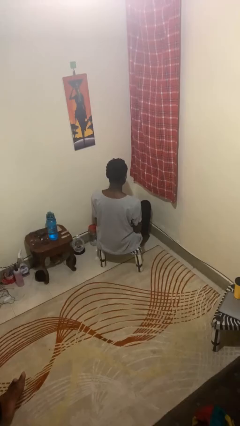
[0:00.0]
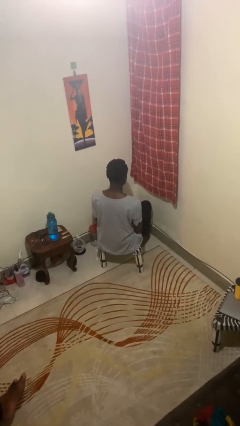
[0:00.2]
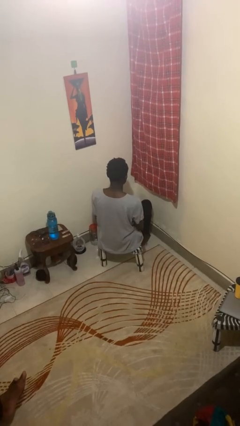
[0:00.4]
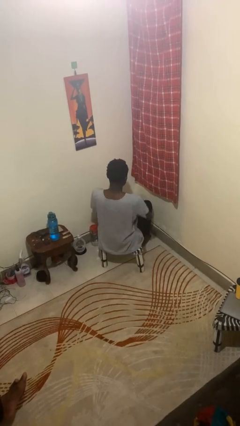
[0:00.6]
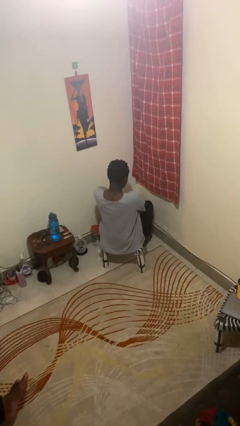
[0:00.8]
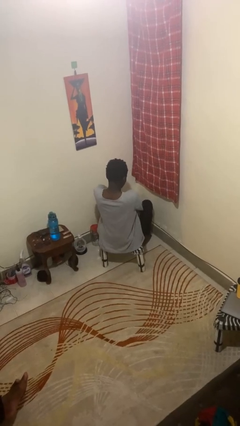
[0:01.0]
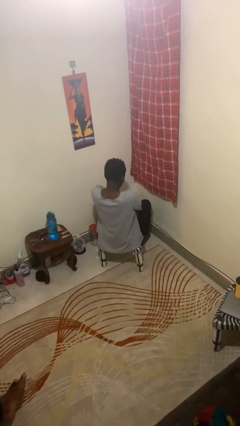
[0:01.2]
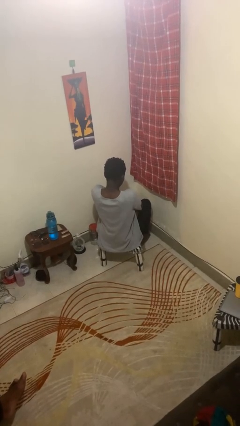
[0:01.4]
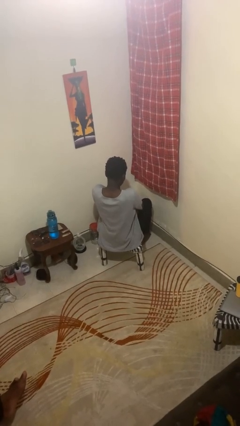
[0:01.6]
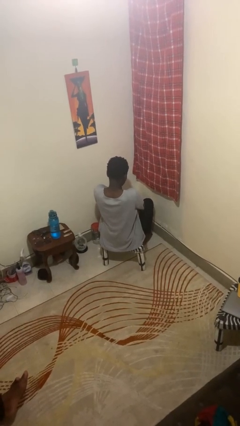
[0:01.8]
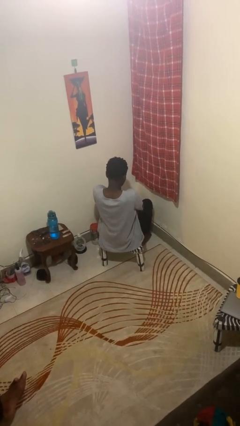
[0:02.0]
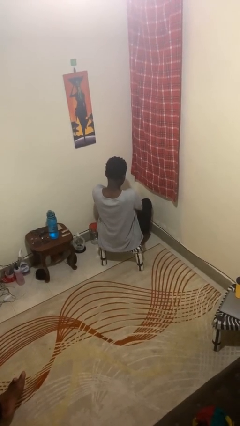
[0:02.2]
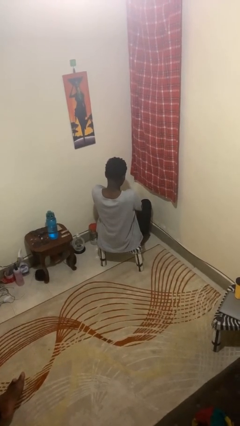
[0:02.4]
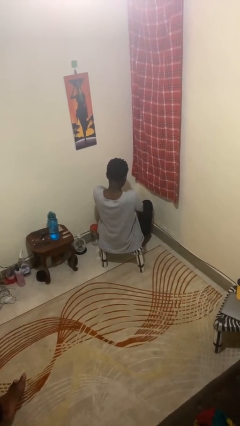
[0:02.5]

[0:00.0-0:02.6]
person crosses arms

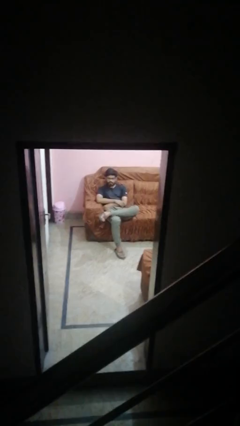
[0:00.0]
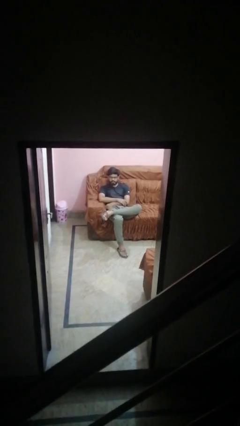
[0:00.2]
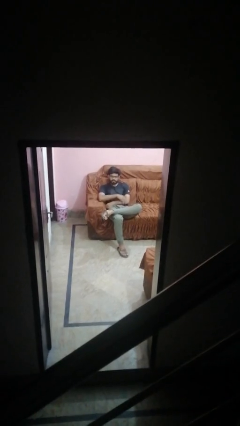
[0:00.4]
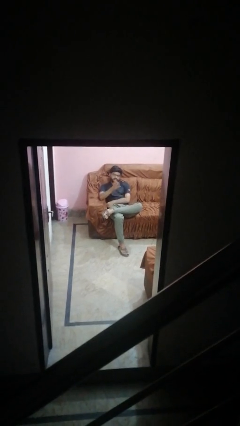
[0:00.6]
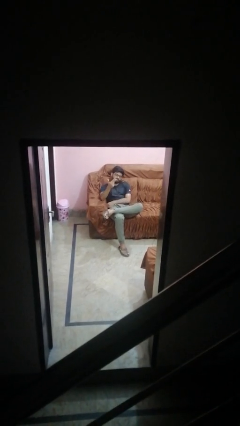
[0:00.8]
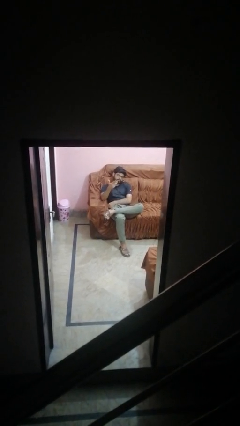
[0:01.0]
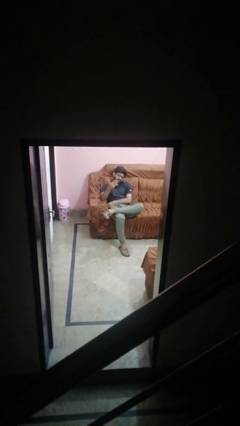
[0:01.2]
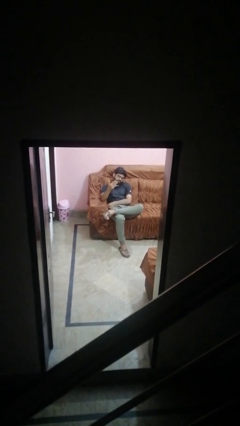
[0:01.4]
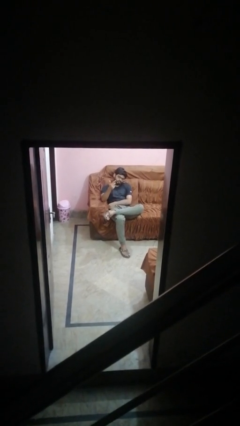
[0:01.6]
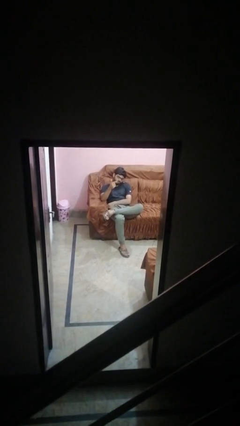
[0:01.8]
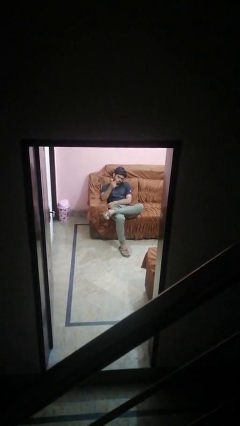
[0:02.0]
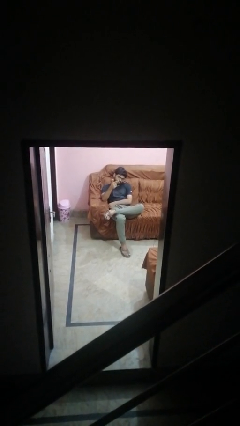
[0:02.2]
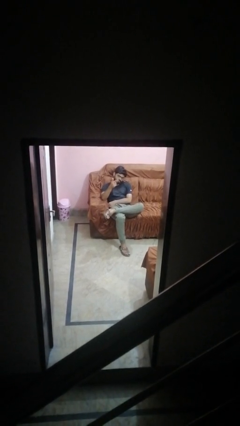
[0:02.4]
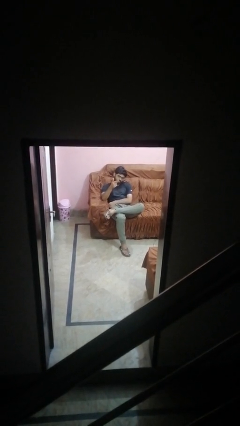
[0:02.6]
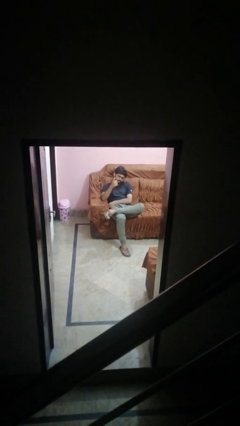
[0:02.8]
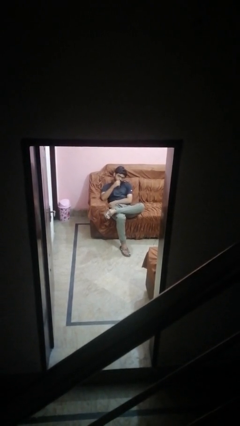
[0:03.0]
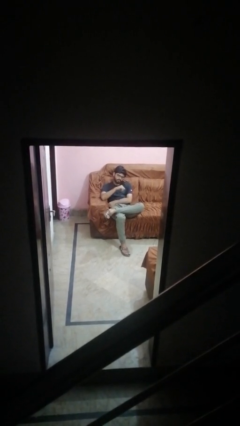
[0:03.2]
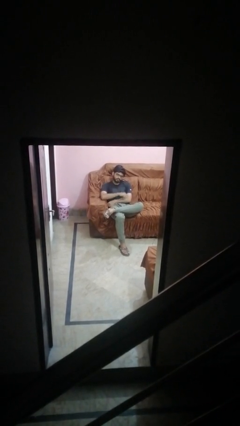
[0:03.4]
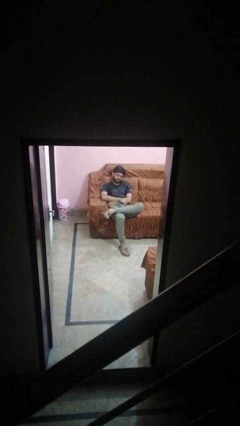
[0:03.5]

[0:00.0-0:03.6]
person gestures come here

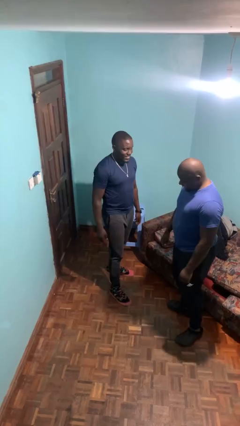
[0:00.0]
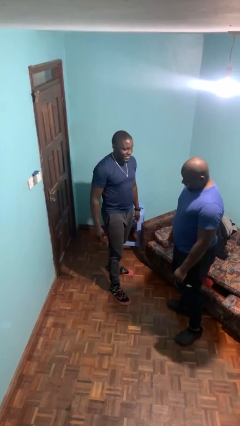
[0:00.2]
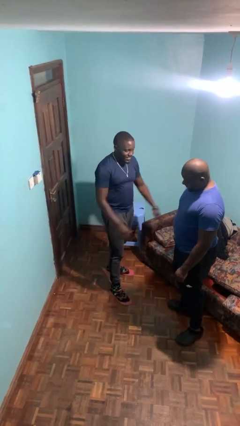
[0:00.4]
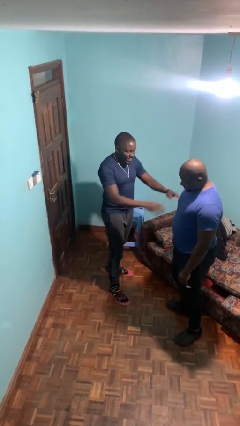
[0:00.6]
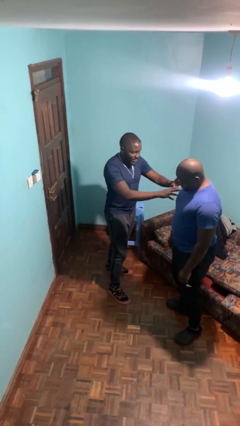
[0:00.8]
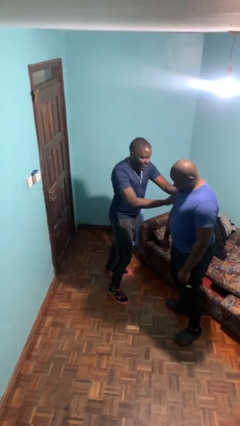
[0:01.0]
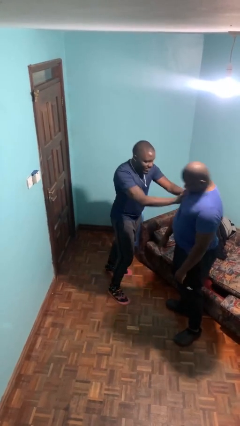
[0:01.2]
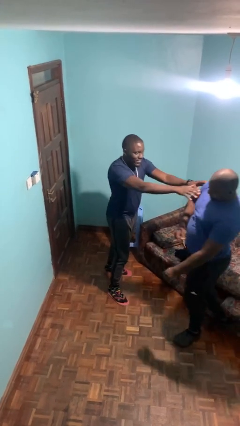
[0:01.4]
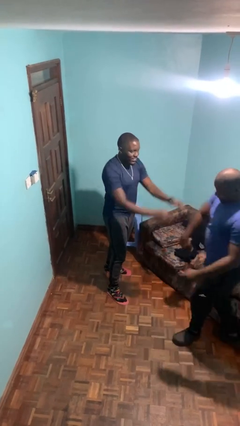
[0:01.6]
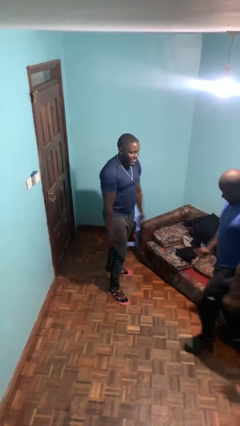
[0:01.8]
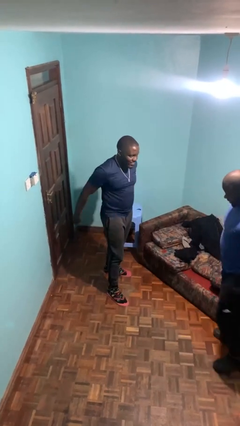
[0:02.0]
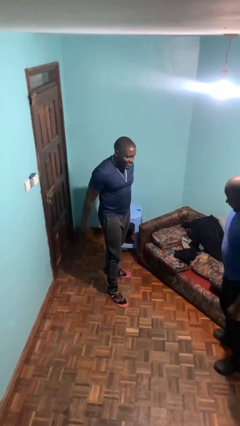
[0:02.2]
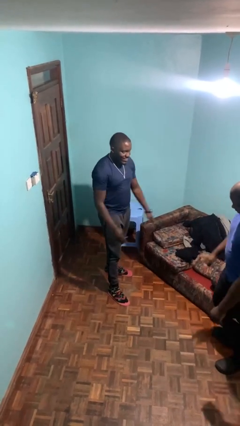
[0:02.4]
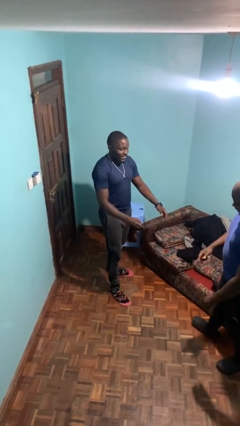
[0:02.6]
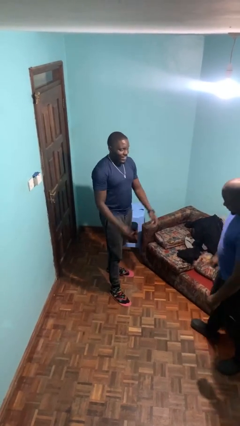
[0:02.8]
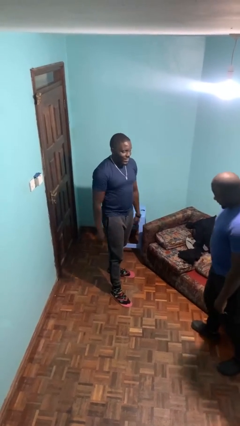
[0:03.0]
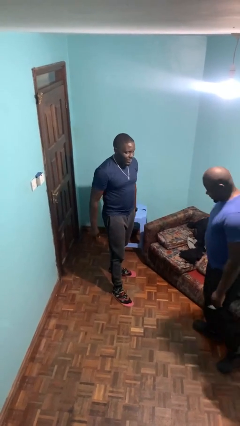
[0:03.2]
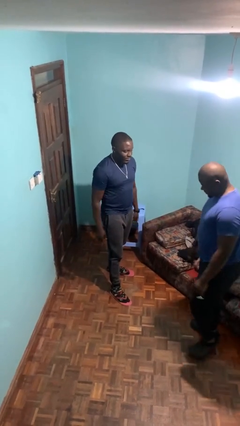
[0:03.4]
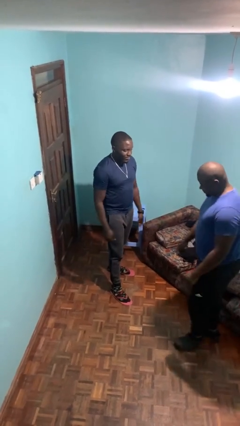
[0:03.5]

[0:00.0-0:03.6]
person shoves person

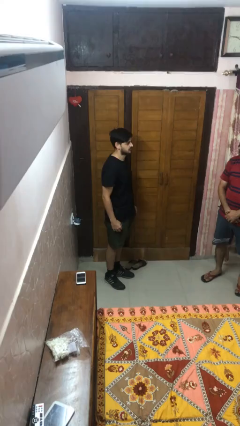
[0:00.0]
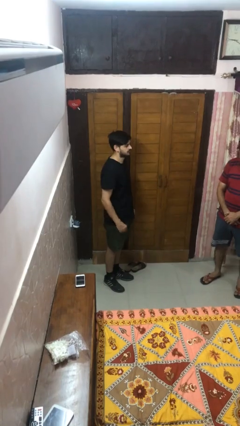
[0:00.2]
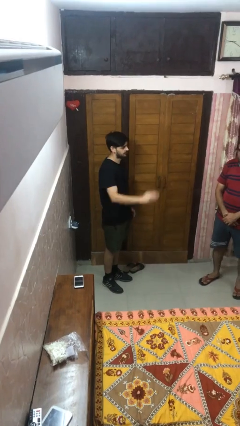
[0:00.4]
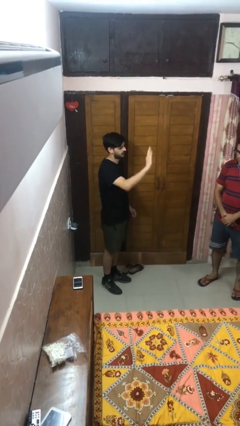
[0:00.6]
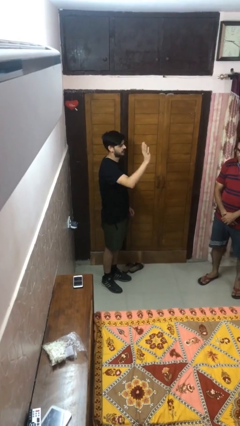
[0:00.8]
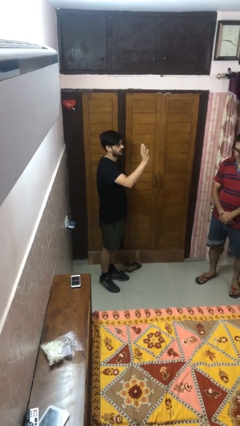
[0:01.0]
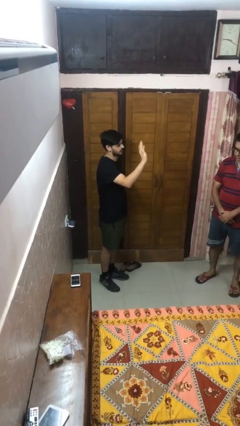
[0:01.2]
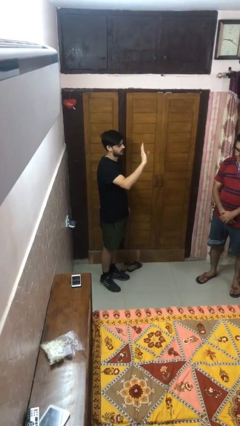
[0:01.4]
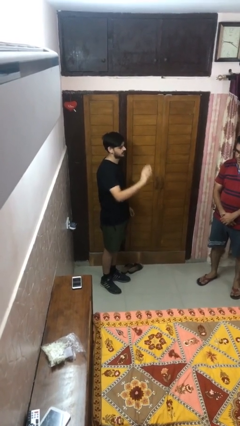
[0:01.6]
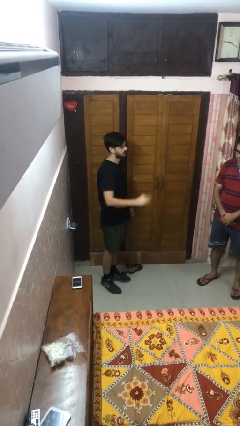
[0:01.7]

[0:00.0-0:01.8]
person waves at person

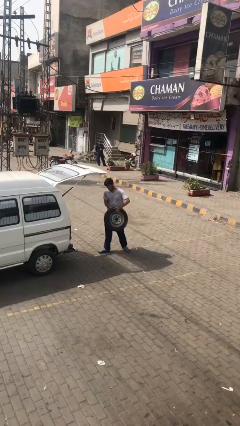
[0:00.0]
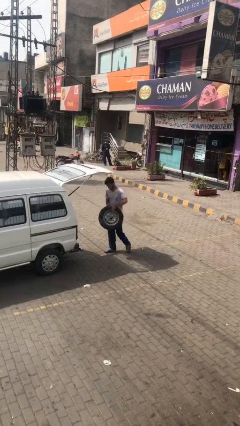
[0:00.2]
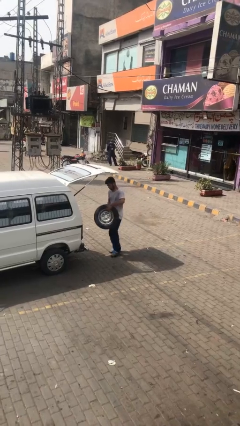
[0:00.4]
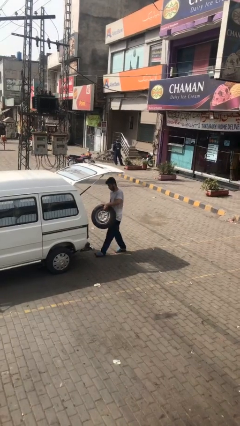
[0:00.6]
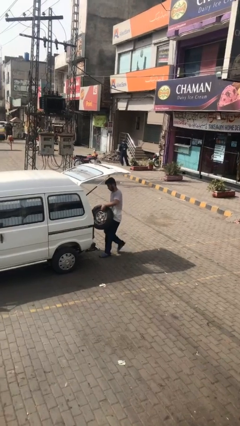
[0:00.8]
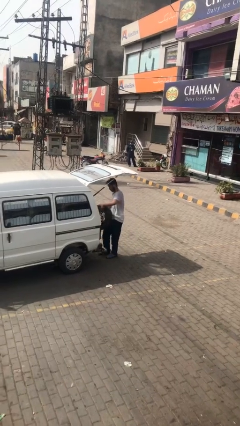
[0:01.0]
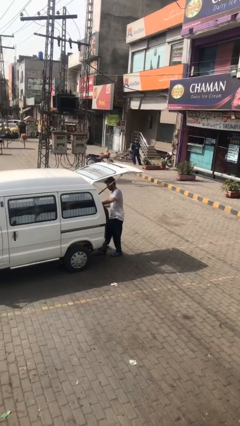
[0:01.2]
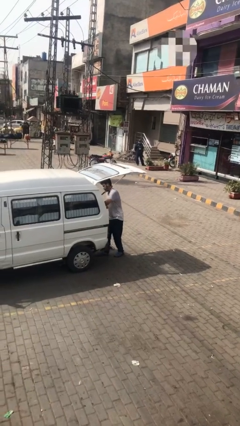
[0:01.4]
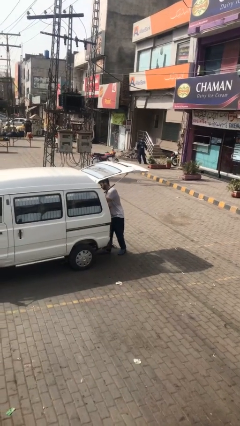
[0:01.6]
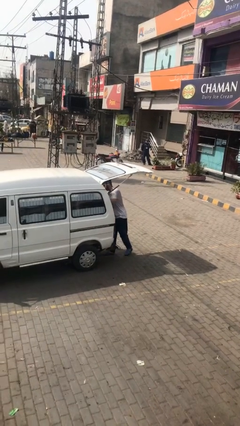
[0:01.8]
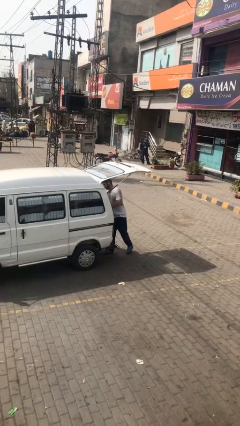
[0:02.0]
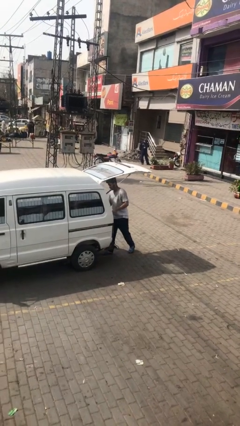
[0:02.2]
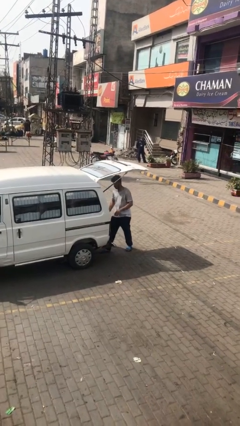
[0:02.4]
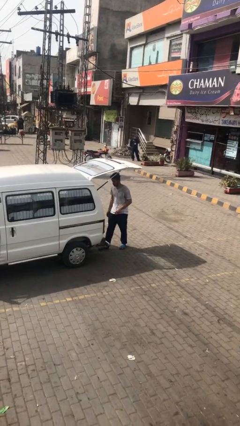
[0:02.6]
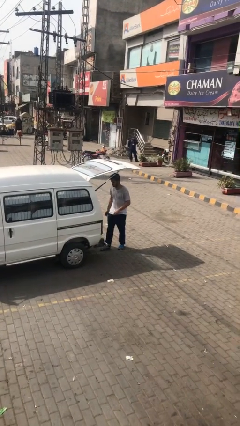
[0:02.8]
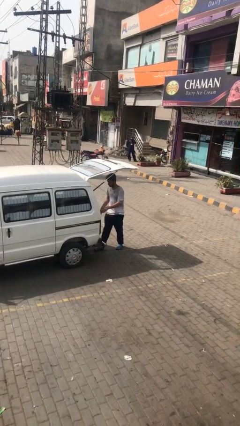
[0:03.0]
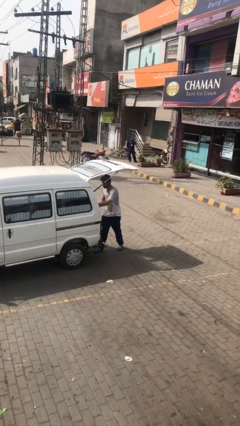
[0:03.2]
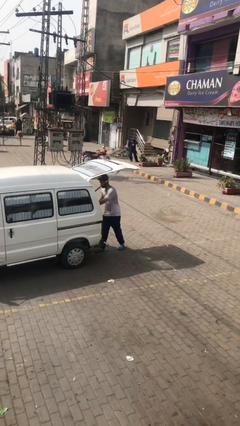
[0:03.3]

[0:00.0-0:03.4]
person loads car

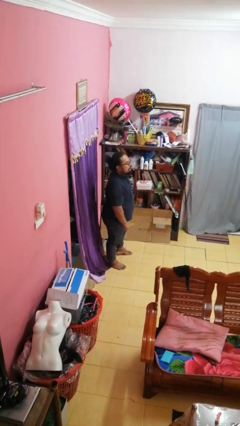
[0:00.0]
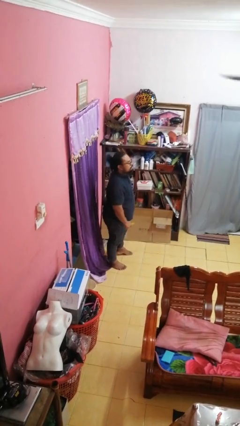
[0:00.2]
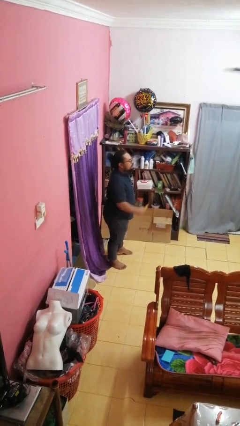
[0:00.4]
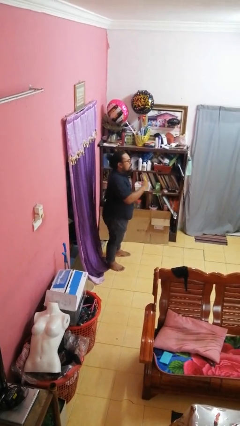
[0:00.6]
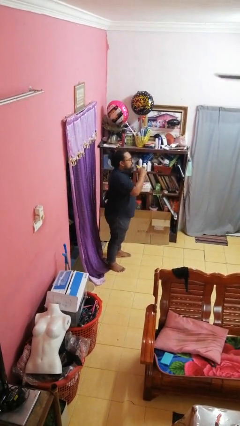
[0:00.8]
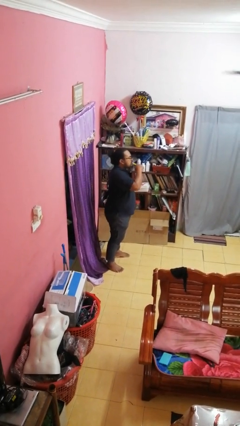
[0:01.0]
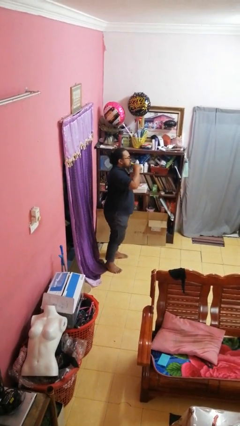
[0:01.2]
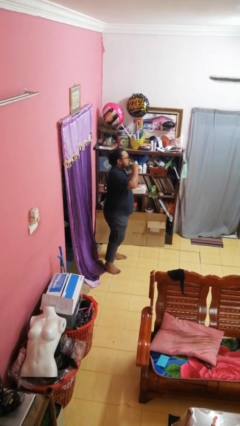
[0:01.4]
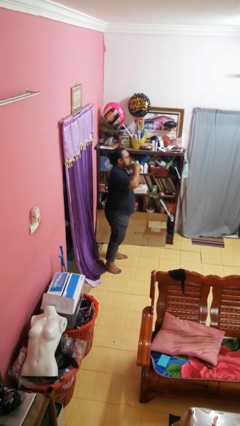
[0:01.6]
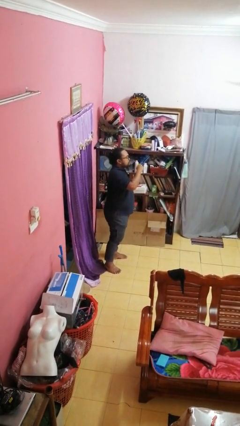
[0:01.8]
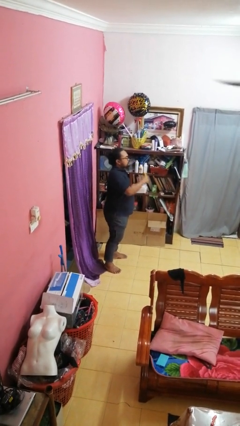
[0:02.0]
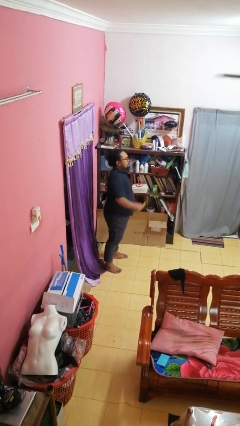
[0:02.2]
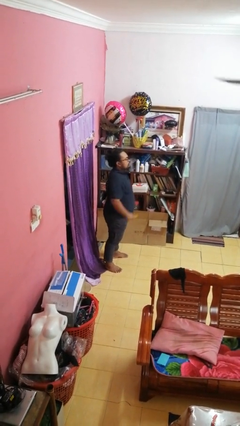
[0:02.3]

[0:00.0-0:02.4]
person eats banana

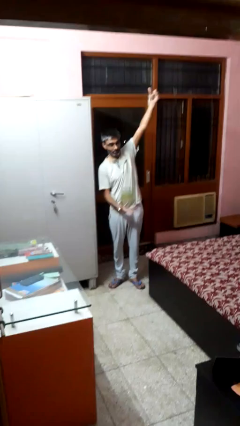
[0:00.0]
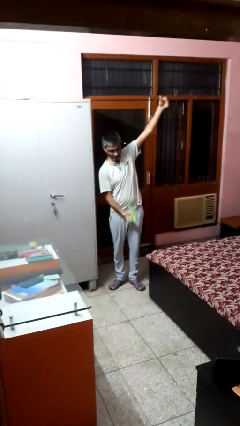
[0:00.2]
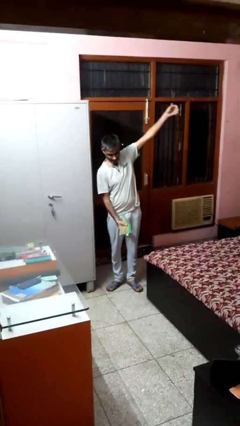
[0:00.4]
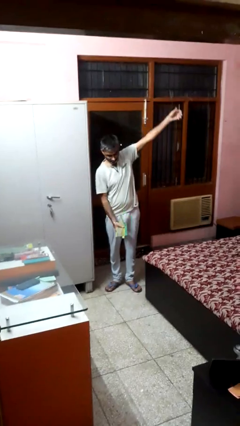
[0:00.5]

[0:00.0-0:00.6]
person catches dropped object
